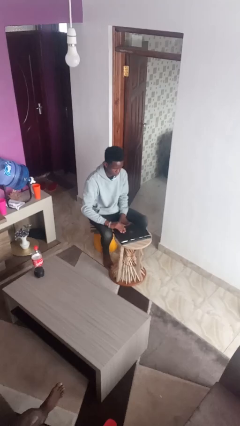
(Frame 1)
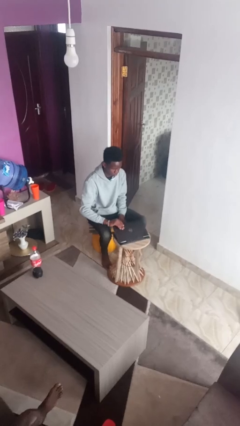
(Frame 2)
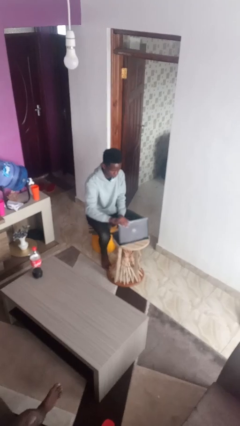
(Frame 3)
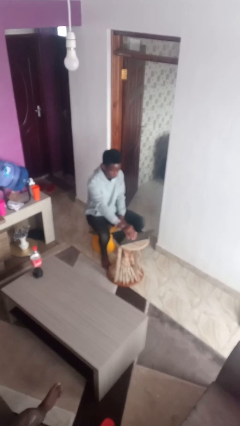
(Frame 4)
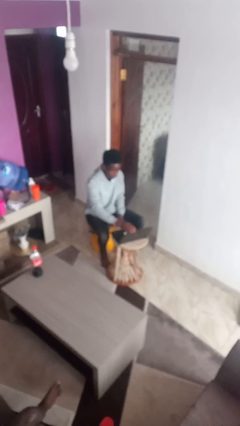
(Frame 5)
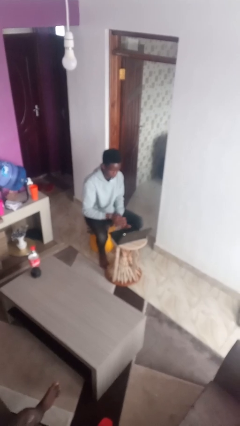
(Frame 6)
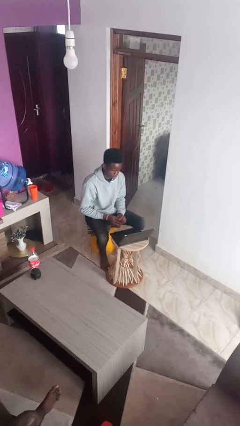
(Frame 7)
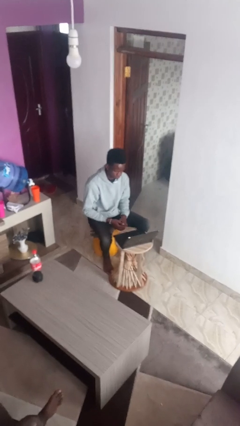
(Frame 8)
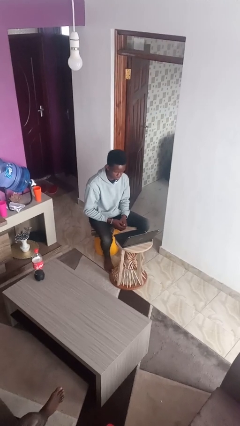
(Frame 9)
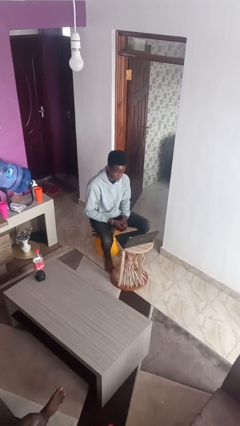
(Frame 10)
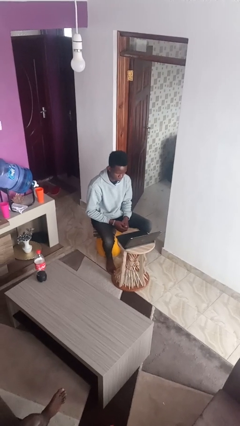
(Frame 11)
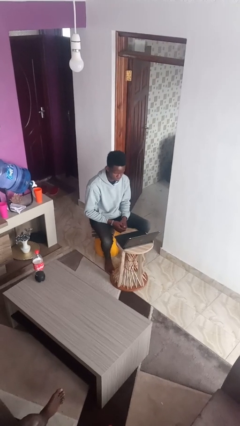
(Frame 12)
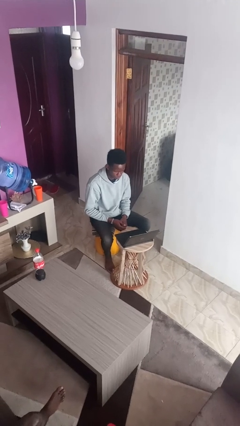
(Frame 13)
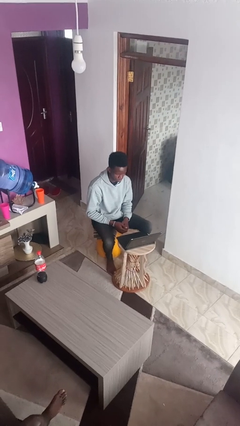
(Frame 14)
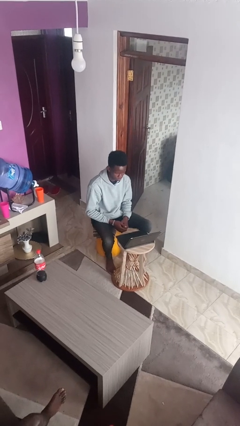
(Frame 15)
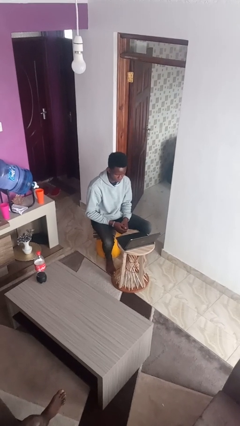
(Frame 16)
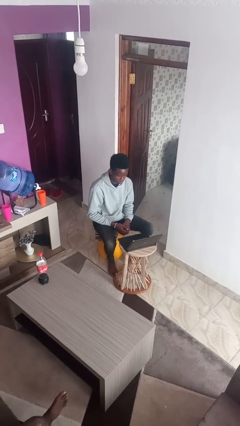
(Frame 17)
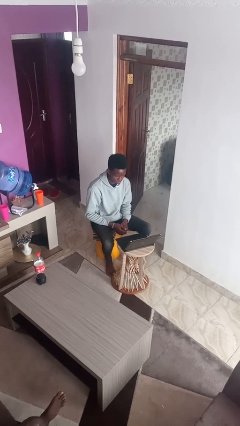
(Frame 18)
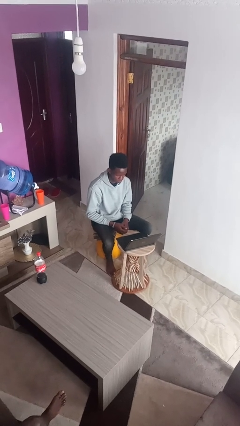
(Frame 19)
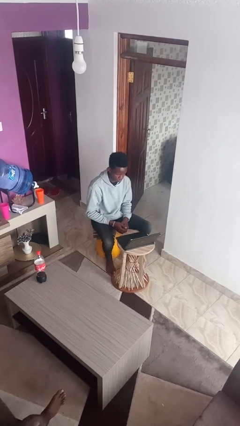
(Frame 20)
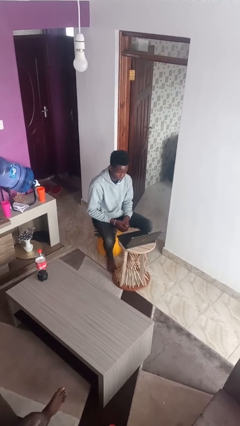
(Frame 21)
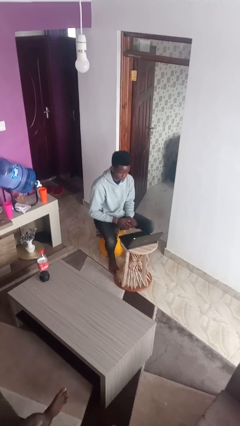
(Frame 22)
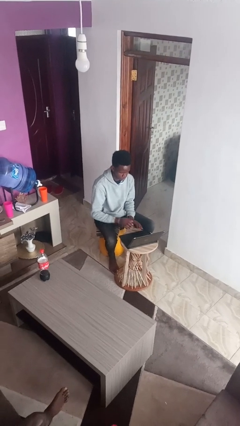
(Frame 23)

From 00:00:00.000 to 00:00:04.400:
person opens laptop

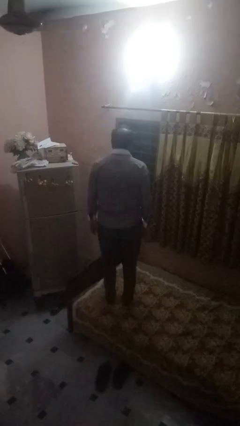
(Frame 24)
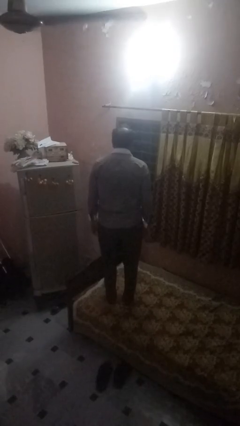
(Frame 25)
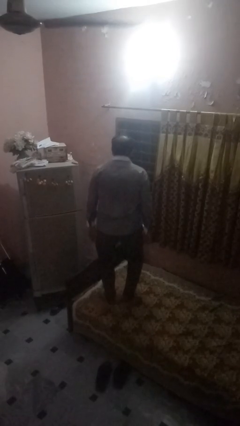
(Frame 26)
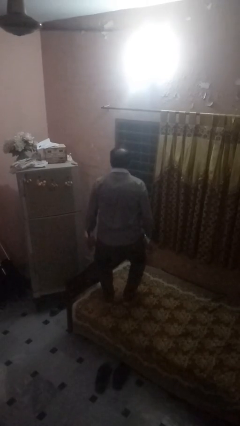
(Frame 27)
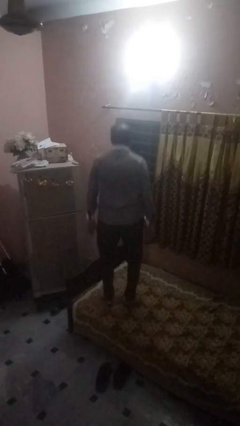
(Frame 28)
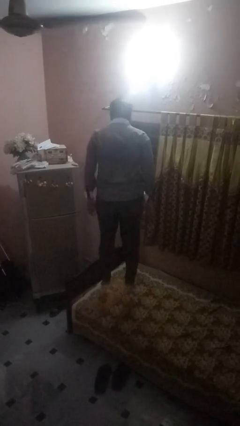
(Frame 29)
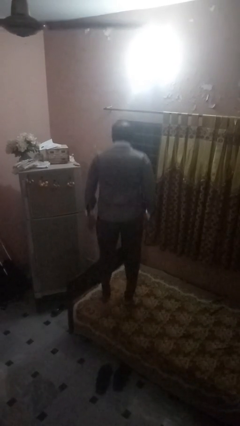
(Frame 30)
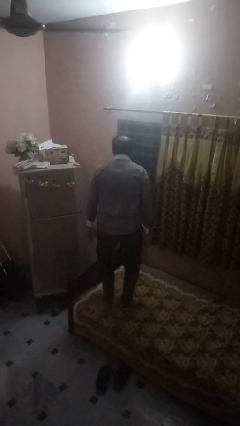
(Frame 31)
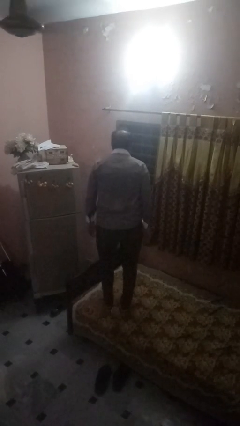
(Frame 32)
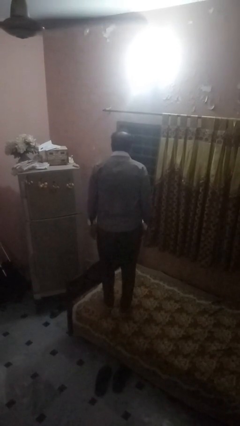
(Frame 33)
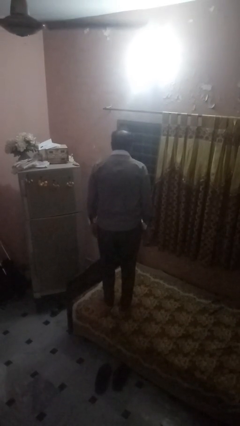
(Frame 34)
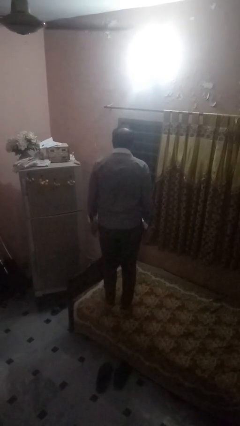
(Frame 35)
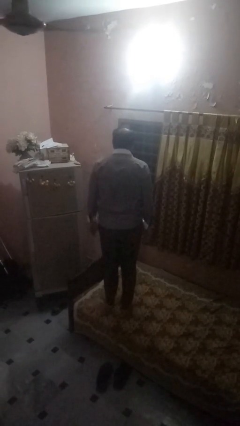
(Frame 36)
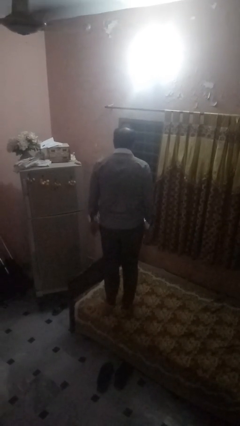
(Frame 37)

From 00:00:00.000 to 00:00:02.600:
person jumps on bed

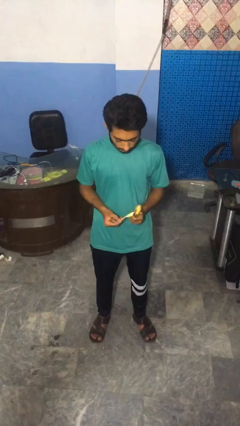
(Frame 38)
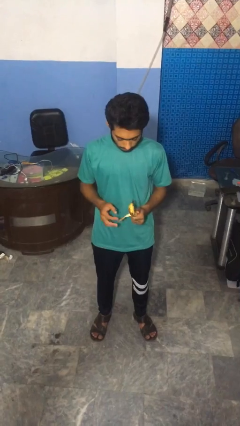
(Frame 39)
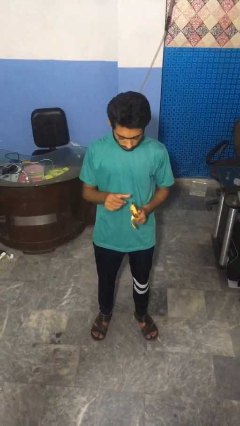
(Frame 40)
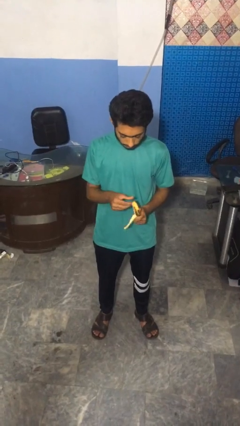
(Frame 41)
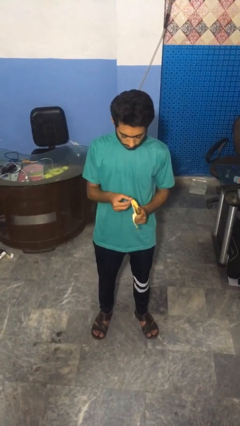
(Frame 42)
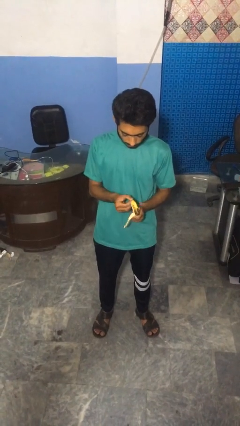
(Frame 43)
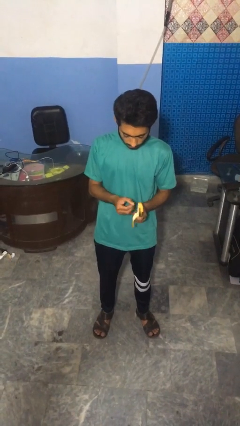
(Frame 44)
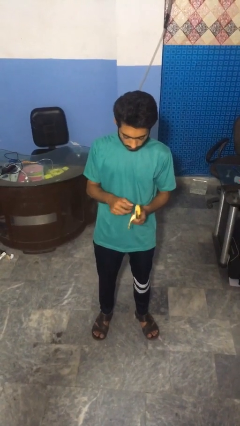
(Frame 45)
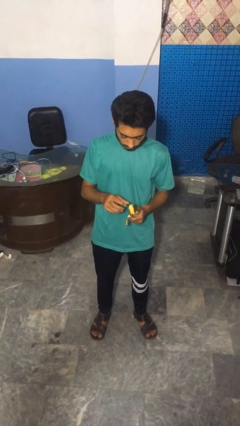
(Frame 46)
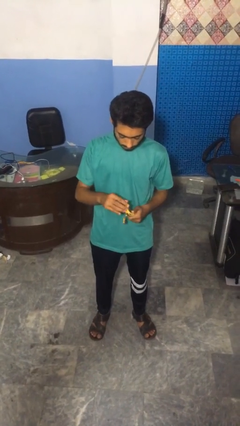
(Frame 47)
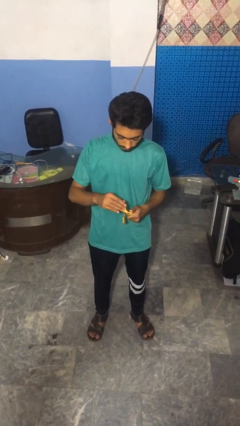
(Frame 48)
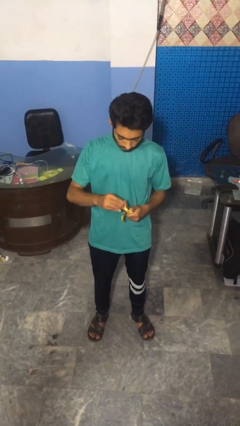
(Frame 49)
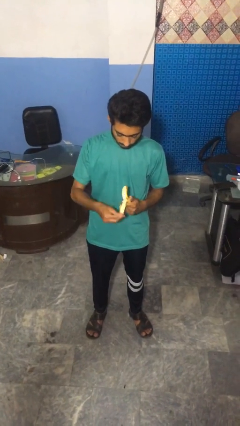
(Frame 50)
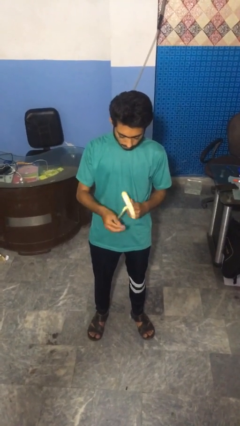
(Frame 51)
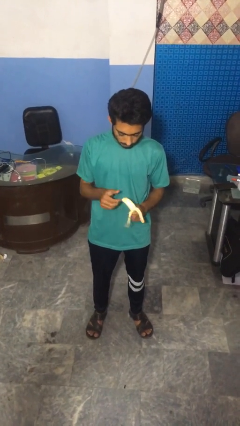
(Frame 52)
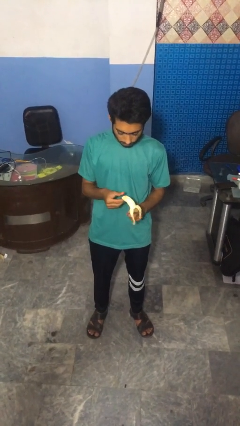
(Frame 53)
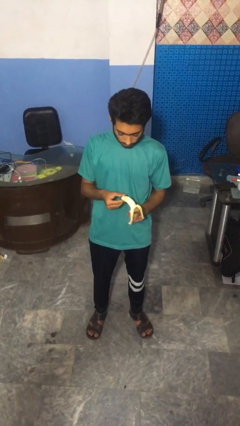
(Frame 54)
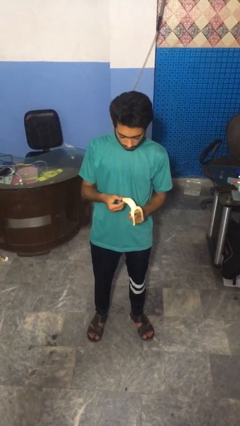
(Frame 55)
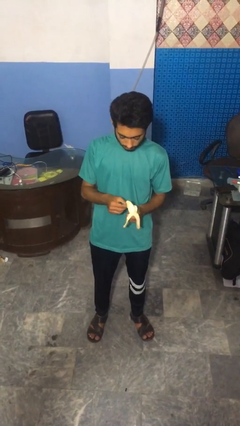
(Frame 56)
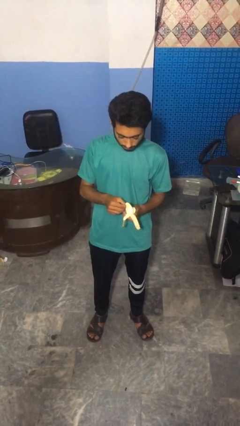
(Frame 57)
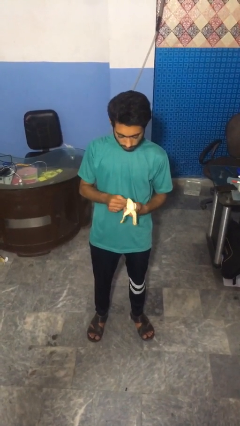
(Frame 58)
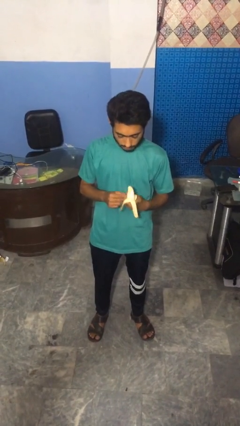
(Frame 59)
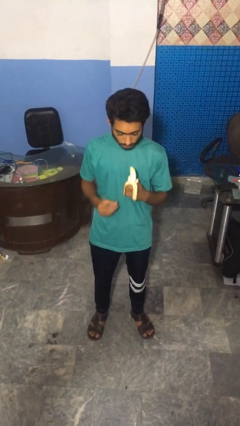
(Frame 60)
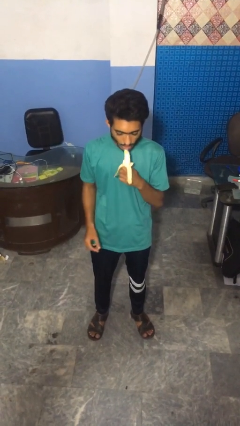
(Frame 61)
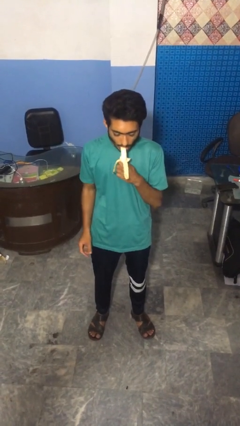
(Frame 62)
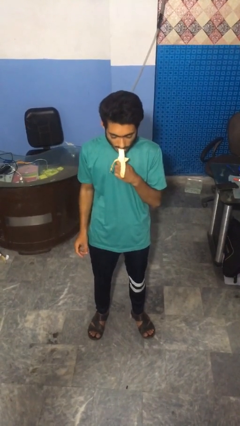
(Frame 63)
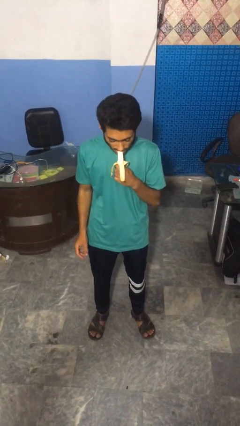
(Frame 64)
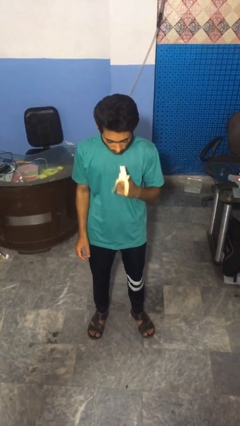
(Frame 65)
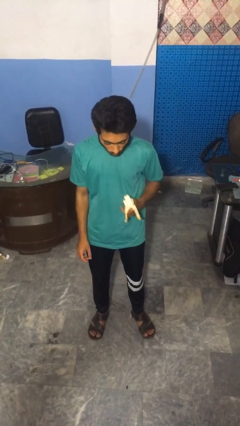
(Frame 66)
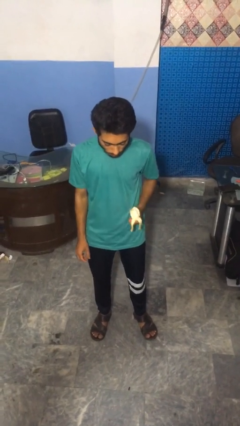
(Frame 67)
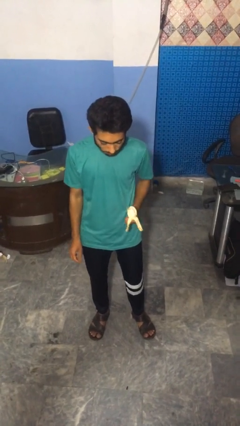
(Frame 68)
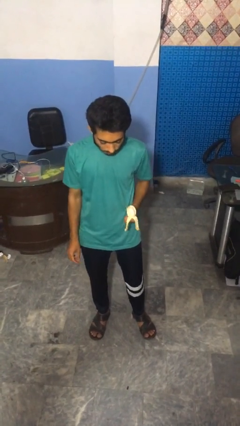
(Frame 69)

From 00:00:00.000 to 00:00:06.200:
person eats banana

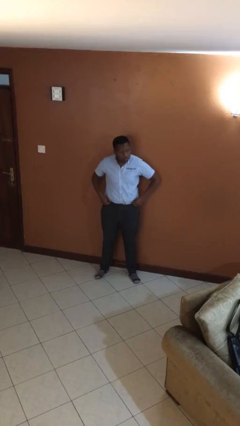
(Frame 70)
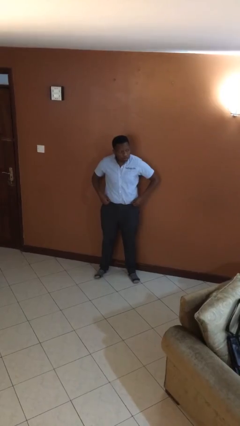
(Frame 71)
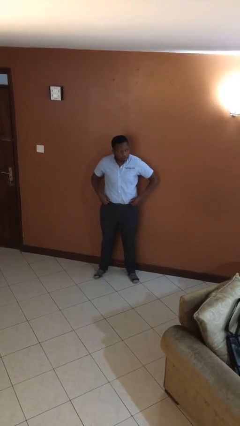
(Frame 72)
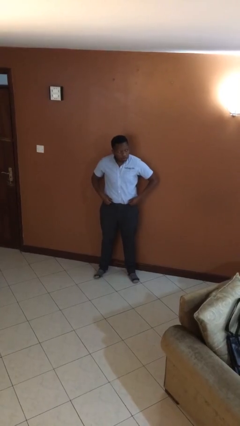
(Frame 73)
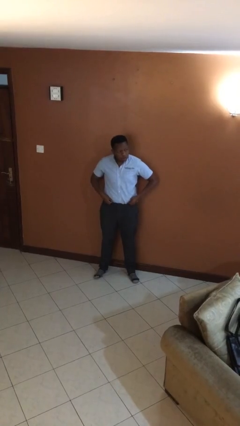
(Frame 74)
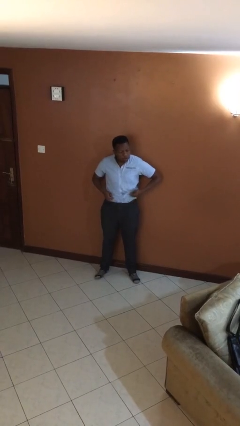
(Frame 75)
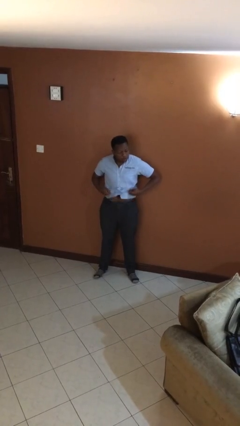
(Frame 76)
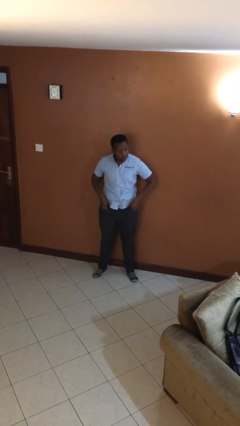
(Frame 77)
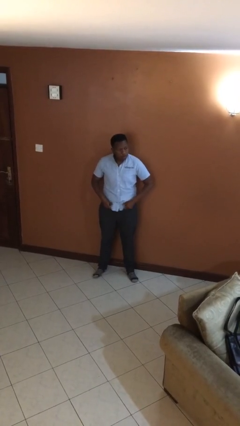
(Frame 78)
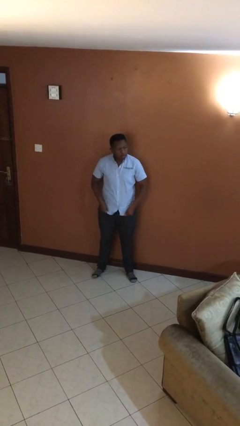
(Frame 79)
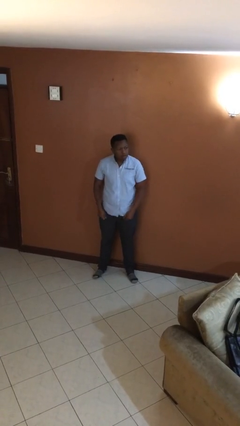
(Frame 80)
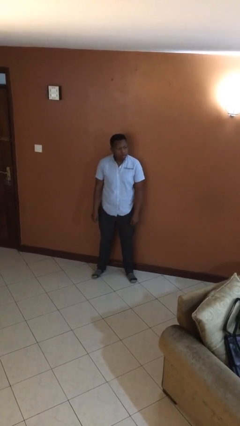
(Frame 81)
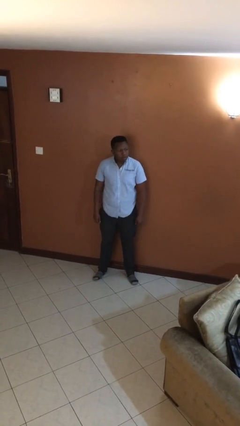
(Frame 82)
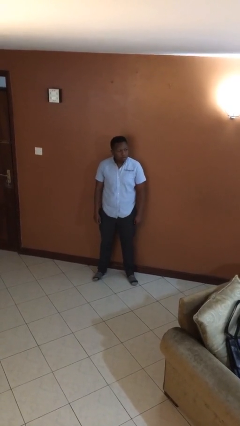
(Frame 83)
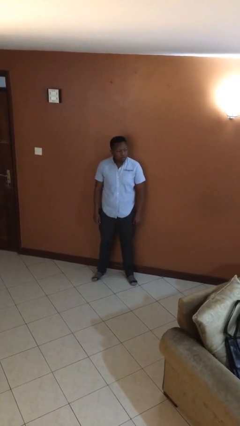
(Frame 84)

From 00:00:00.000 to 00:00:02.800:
person untucks shirt

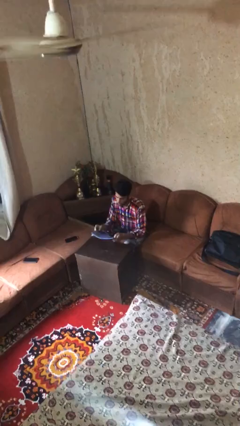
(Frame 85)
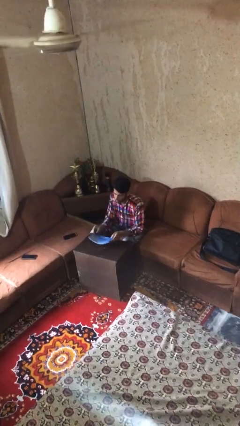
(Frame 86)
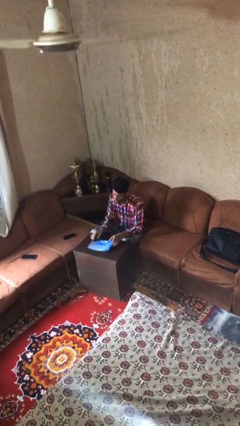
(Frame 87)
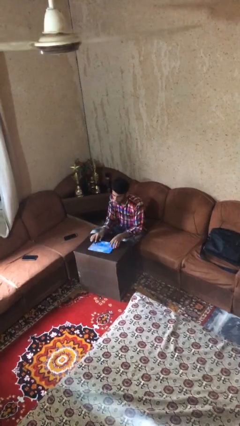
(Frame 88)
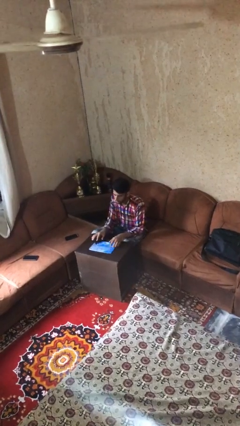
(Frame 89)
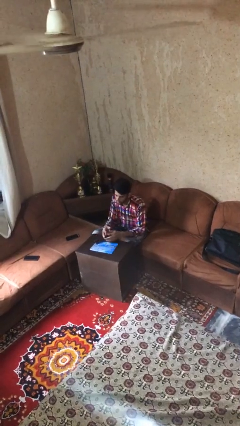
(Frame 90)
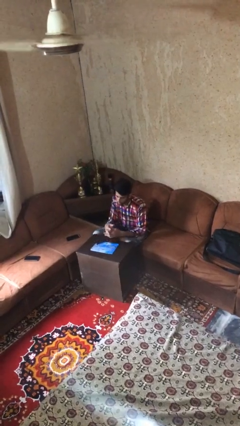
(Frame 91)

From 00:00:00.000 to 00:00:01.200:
person puts down object on table
